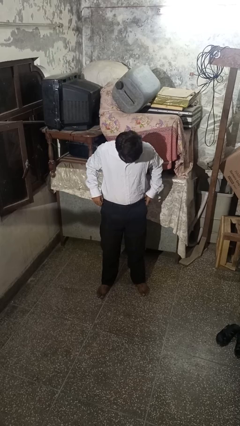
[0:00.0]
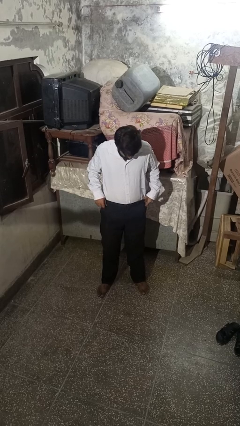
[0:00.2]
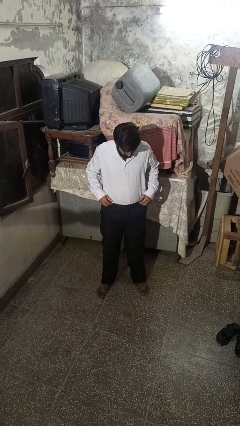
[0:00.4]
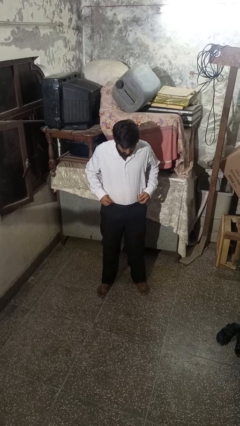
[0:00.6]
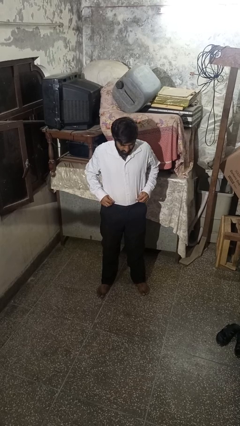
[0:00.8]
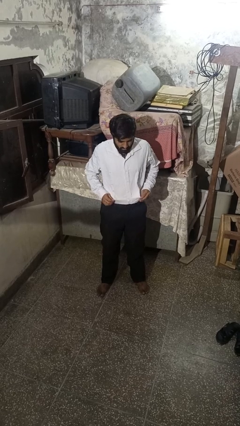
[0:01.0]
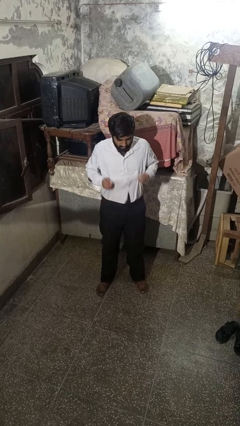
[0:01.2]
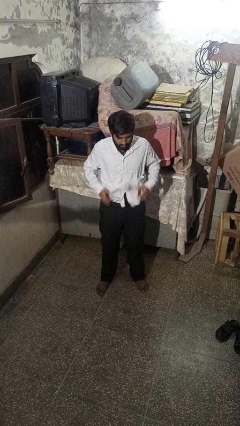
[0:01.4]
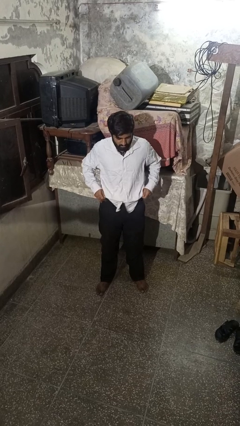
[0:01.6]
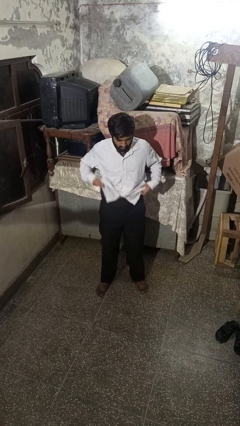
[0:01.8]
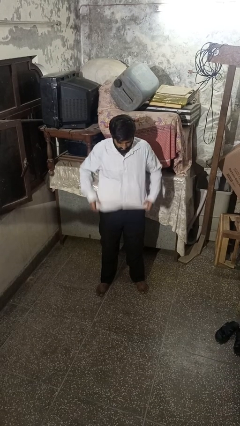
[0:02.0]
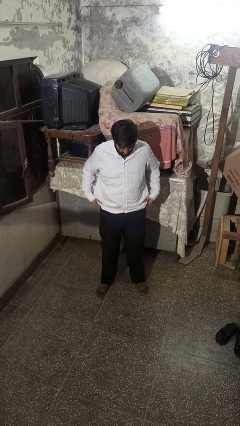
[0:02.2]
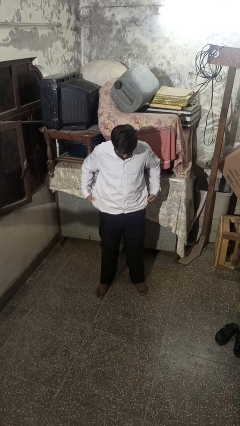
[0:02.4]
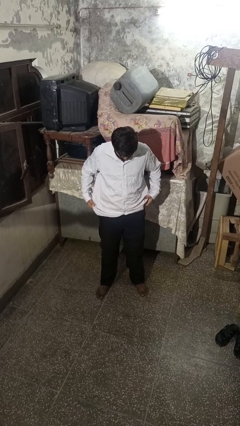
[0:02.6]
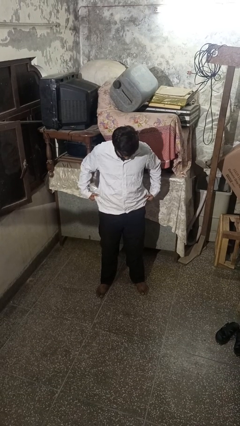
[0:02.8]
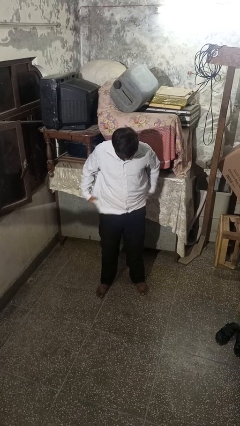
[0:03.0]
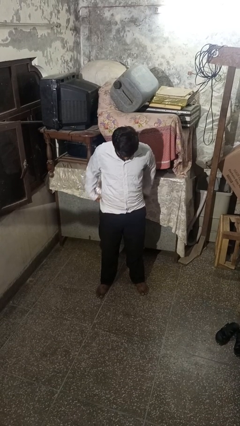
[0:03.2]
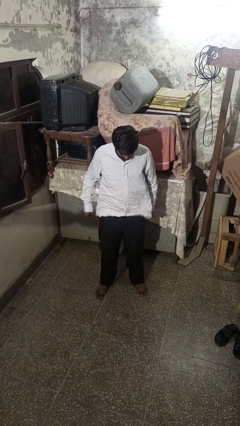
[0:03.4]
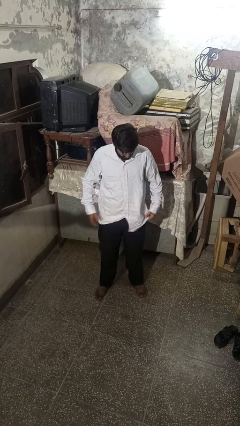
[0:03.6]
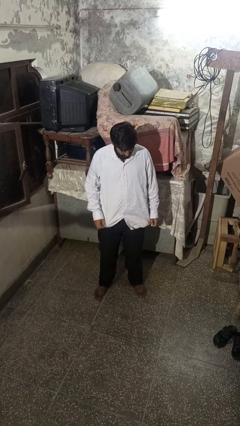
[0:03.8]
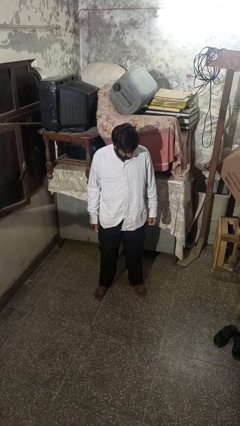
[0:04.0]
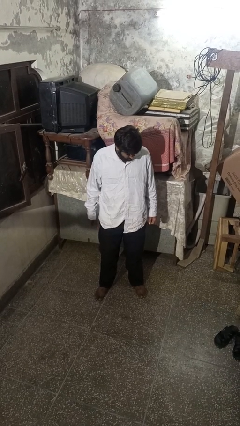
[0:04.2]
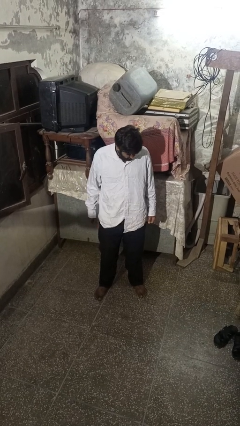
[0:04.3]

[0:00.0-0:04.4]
person untucks shirt

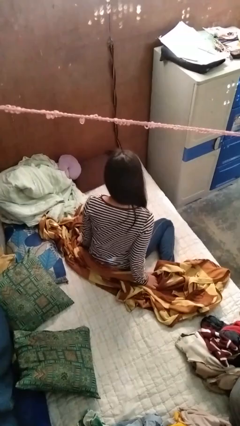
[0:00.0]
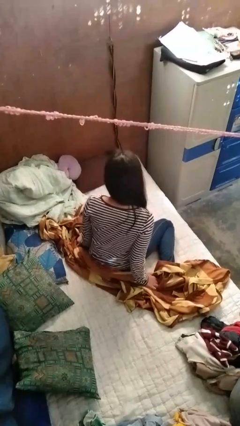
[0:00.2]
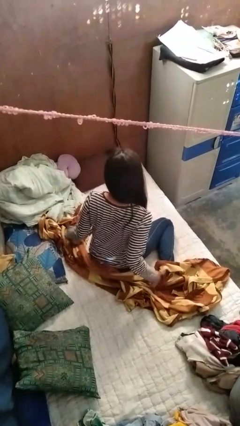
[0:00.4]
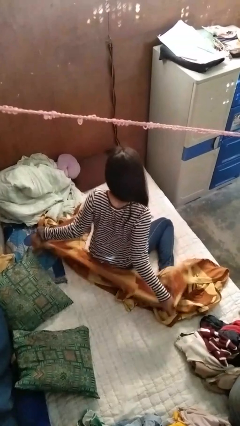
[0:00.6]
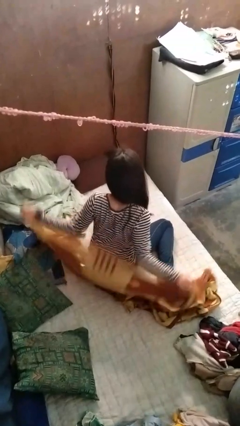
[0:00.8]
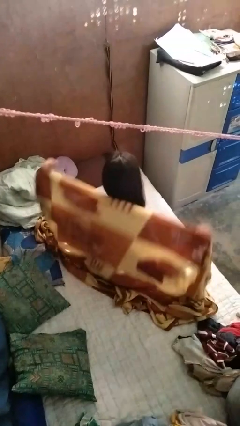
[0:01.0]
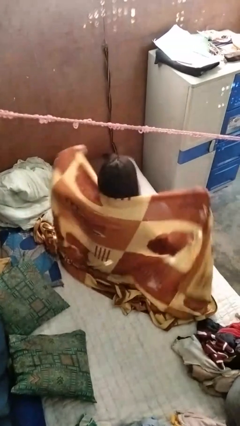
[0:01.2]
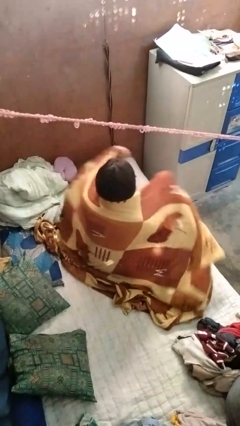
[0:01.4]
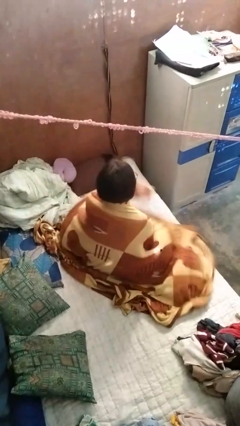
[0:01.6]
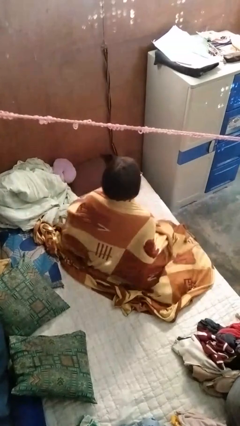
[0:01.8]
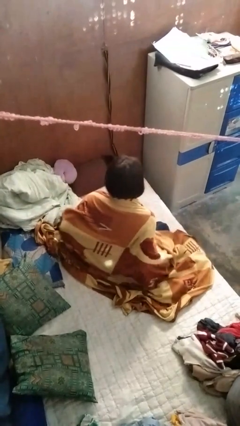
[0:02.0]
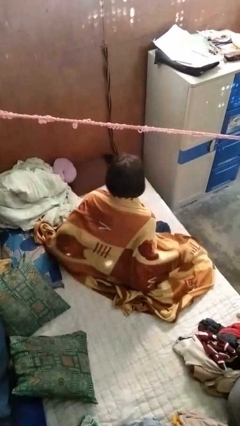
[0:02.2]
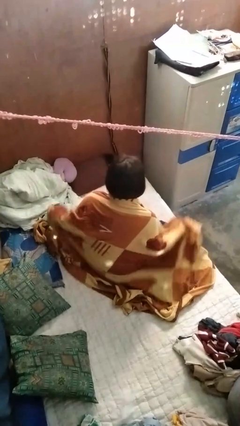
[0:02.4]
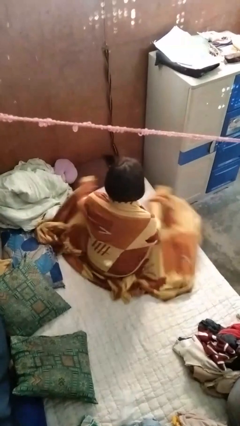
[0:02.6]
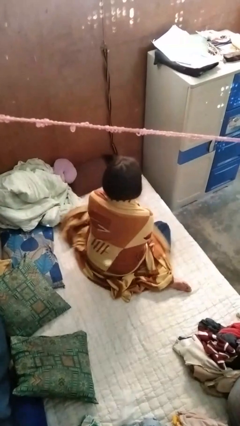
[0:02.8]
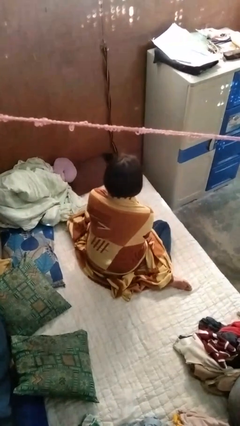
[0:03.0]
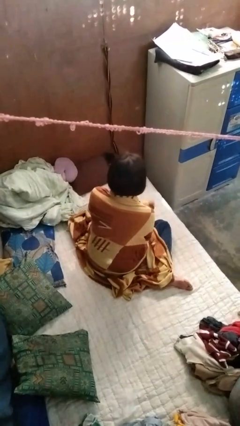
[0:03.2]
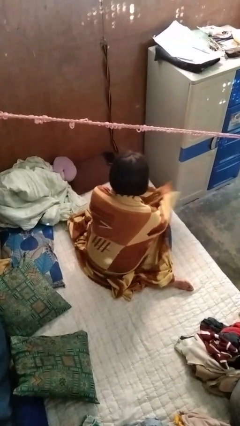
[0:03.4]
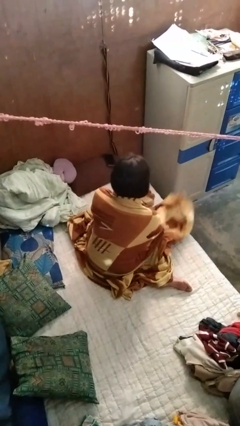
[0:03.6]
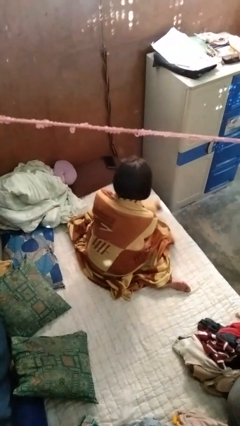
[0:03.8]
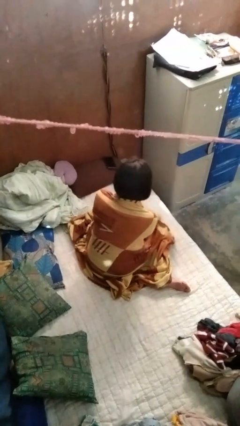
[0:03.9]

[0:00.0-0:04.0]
person covers with blanket

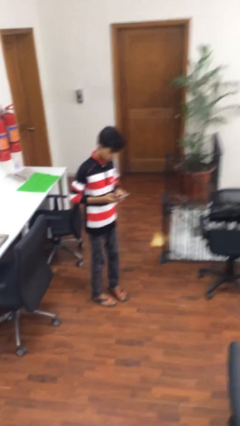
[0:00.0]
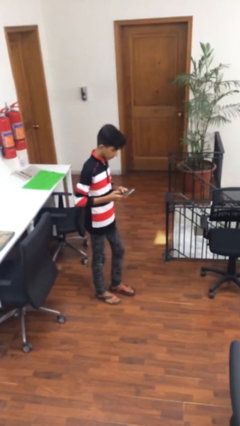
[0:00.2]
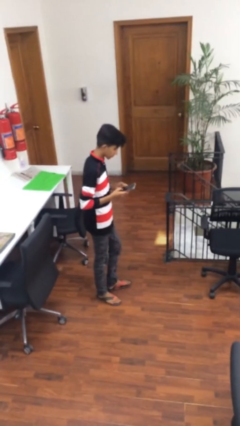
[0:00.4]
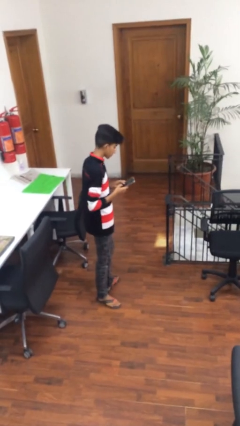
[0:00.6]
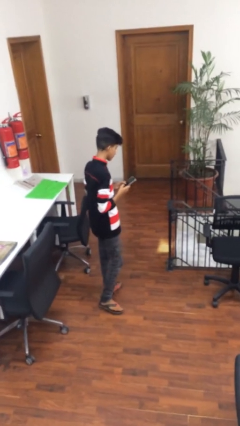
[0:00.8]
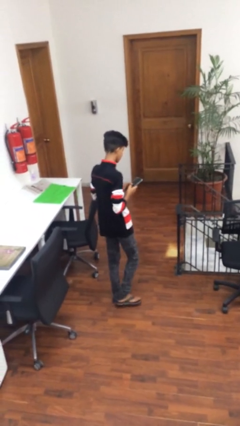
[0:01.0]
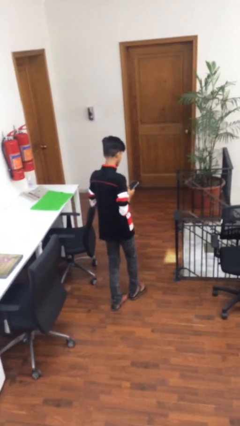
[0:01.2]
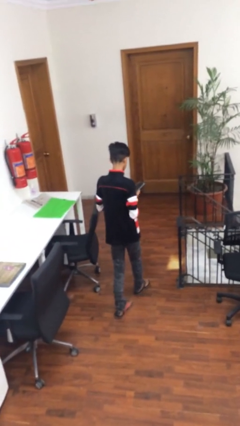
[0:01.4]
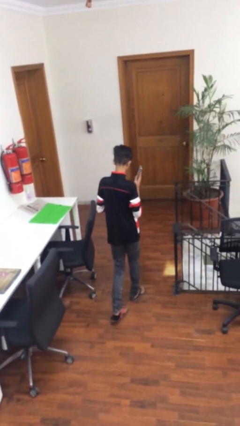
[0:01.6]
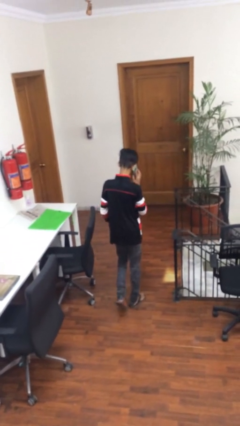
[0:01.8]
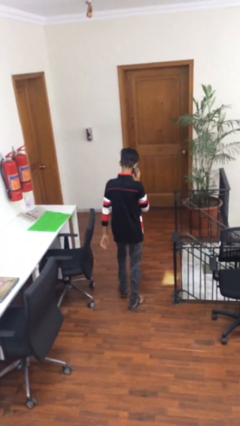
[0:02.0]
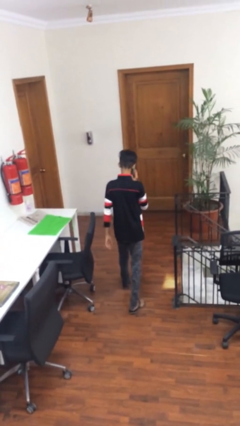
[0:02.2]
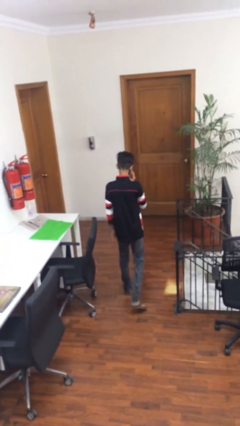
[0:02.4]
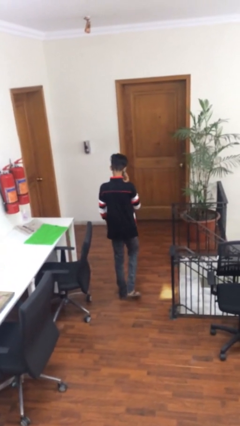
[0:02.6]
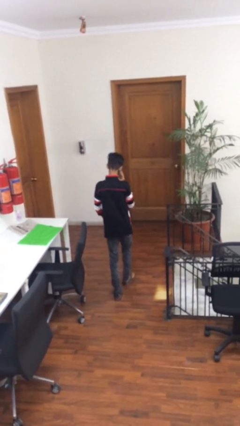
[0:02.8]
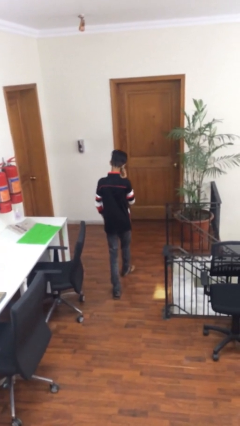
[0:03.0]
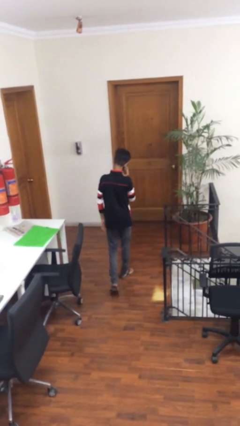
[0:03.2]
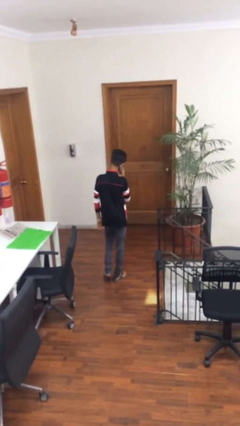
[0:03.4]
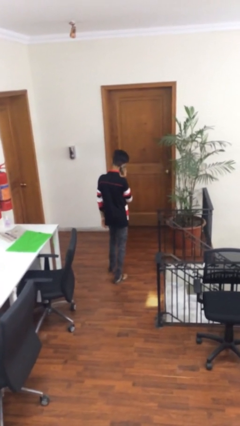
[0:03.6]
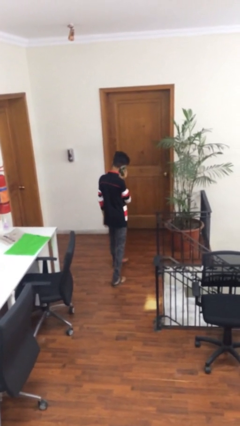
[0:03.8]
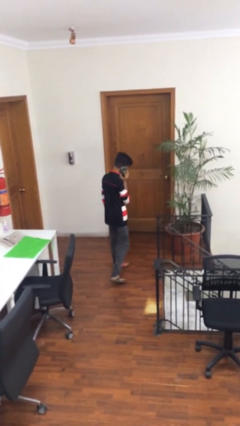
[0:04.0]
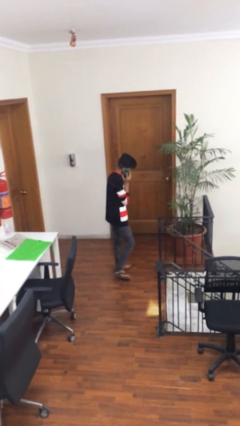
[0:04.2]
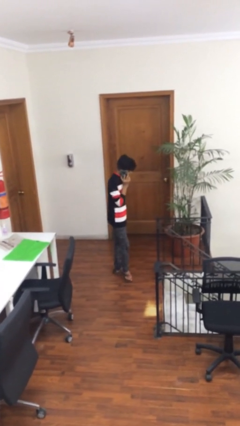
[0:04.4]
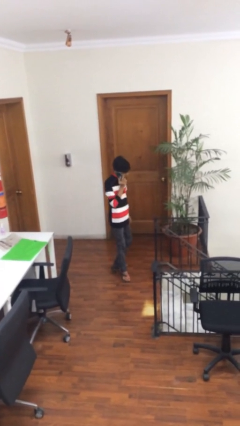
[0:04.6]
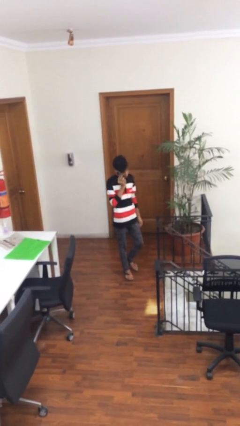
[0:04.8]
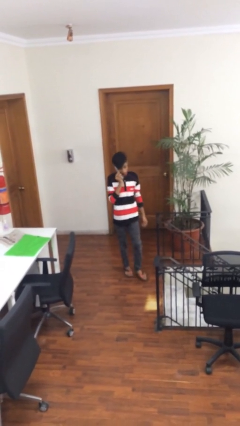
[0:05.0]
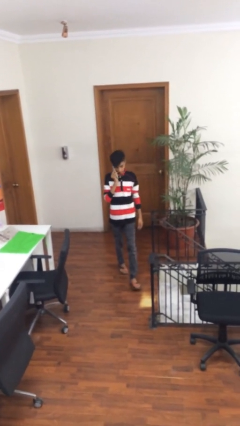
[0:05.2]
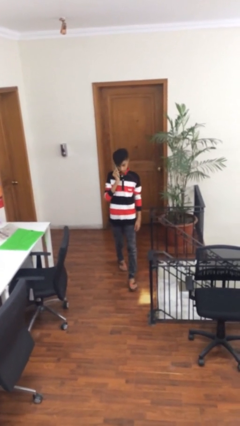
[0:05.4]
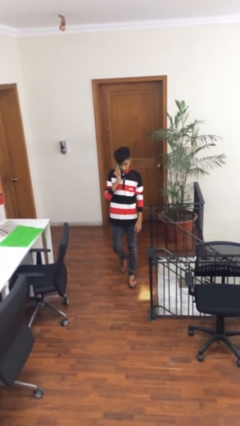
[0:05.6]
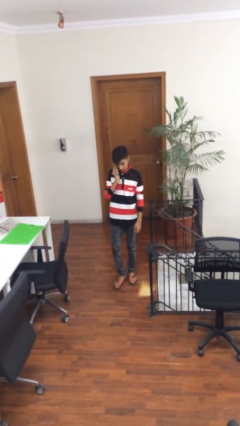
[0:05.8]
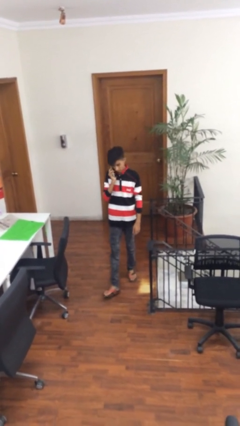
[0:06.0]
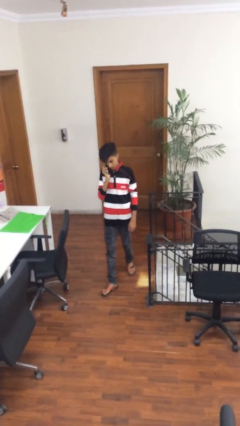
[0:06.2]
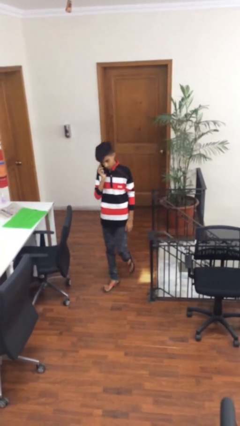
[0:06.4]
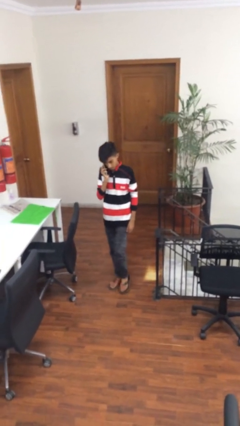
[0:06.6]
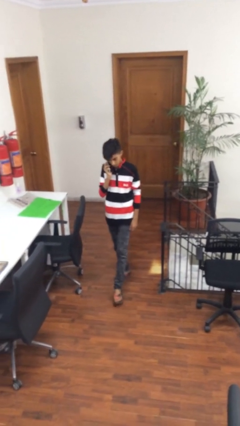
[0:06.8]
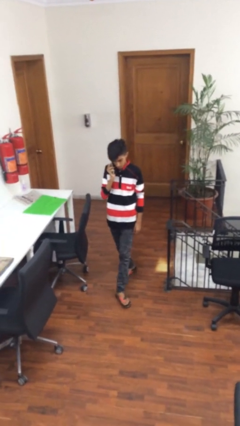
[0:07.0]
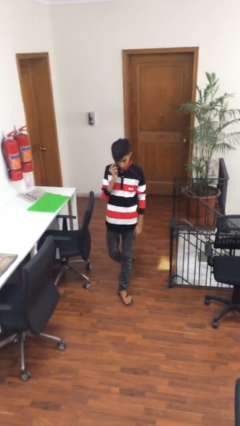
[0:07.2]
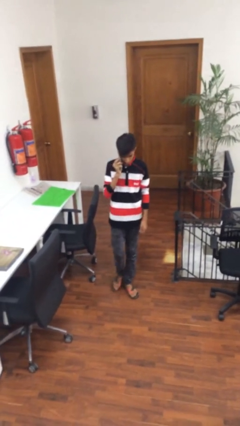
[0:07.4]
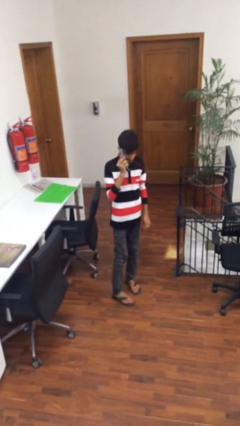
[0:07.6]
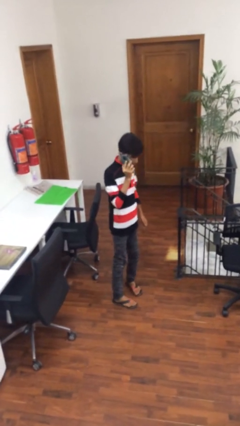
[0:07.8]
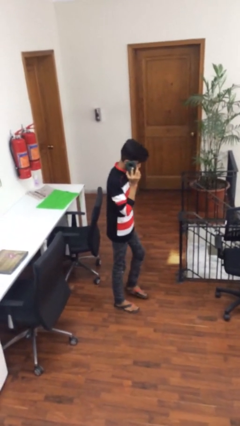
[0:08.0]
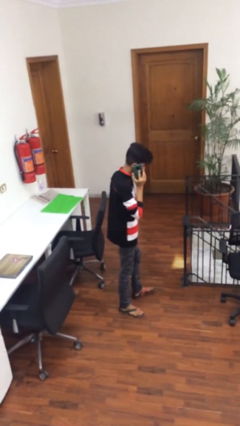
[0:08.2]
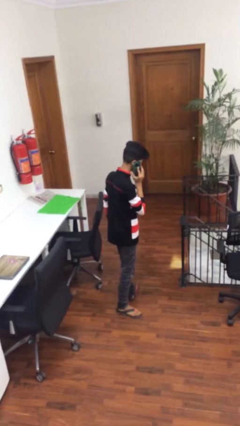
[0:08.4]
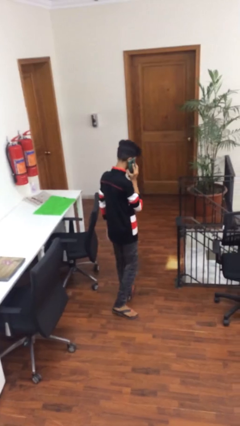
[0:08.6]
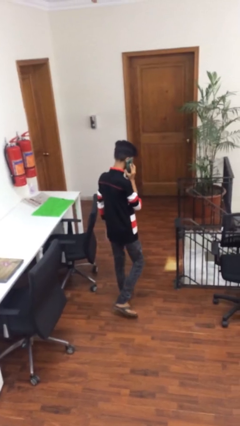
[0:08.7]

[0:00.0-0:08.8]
person talks on phone

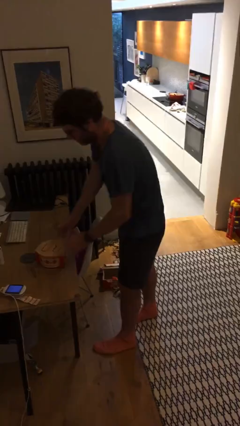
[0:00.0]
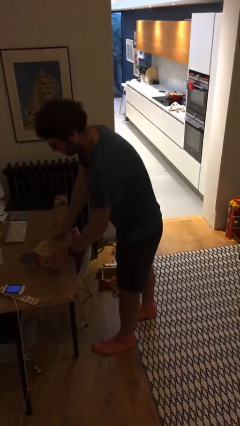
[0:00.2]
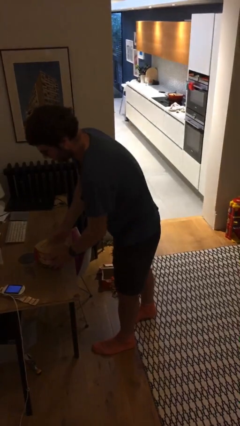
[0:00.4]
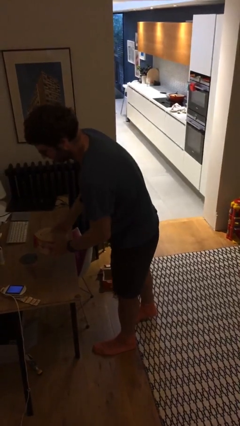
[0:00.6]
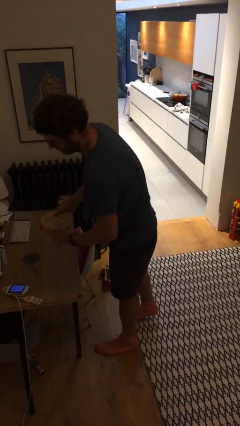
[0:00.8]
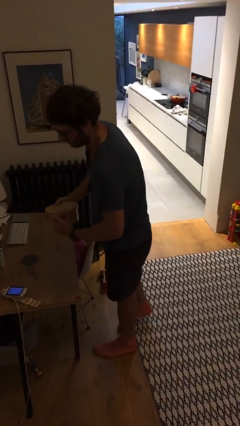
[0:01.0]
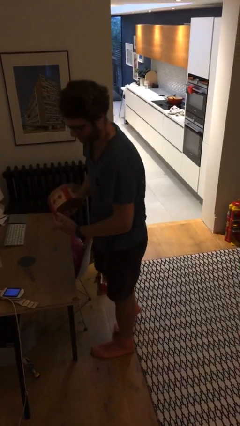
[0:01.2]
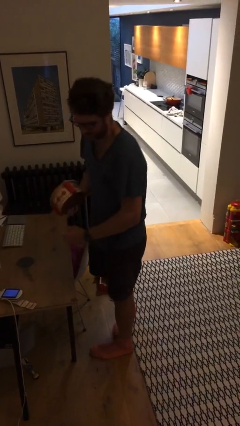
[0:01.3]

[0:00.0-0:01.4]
person picks up object from table
